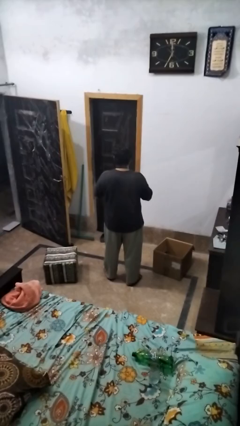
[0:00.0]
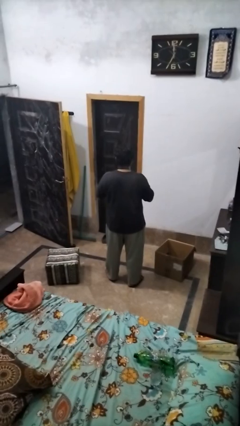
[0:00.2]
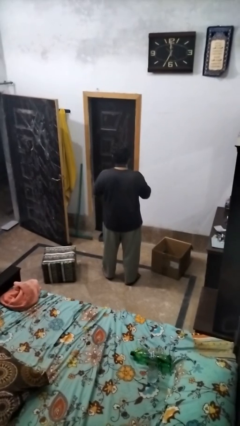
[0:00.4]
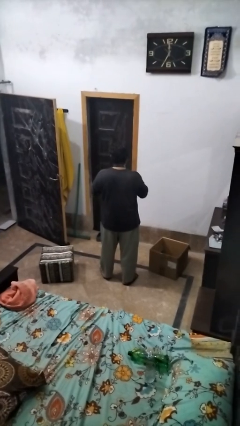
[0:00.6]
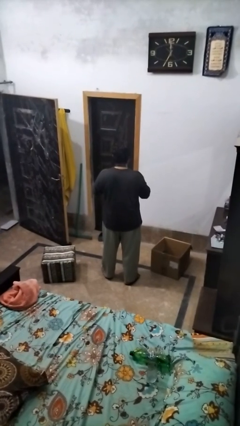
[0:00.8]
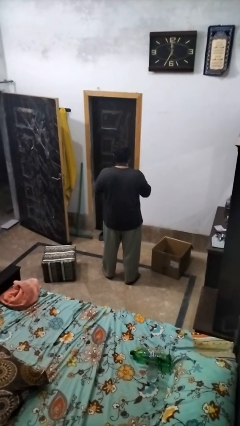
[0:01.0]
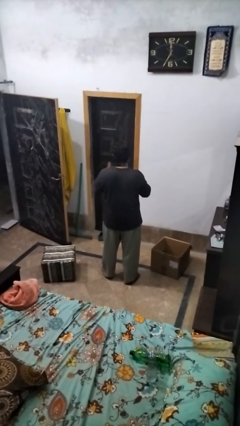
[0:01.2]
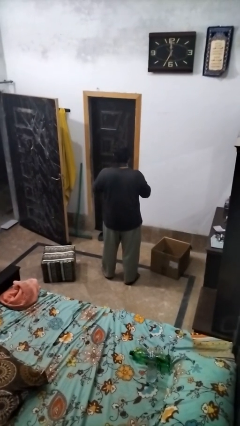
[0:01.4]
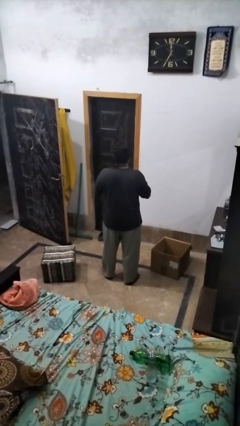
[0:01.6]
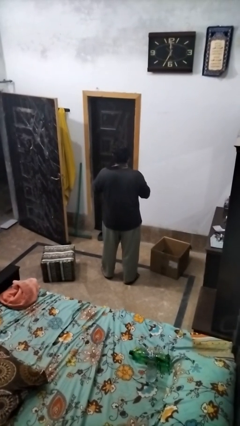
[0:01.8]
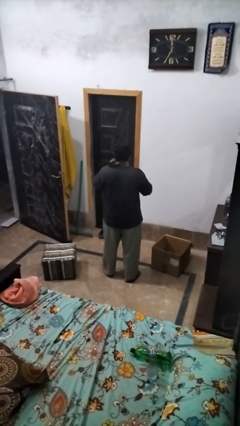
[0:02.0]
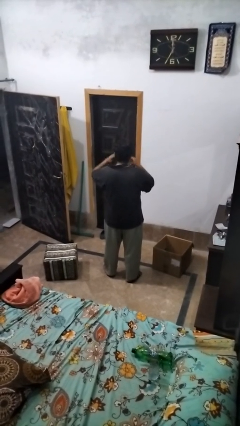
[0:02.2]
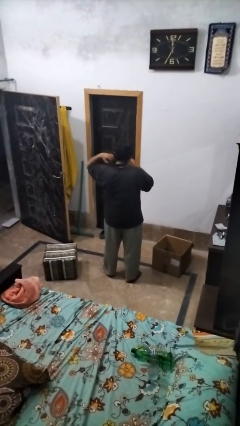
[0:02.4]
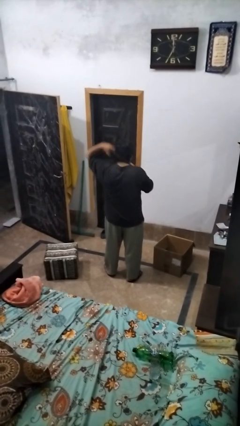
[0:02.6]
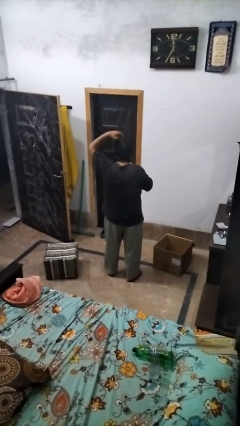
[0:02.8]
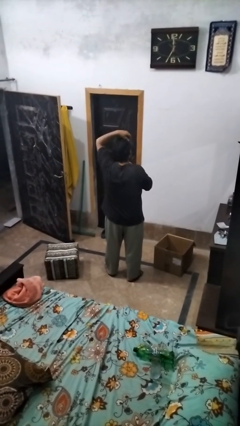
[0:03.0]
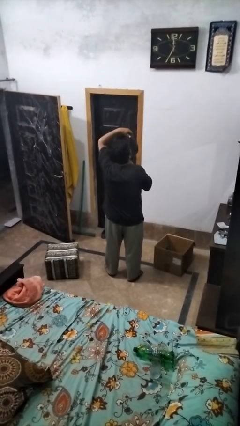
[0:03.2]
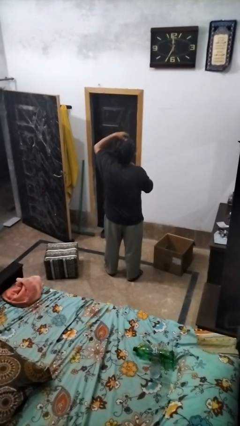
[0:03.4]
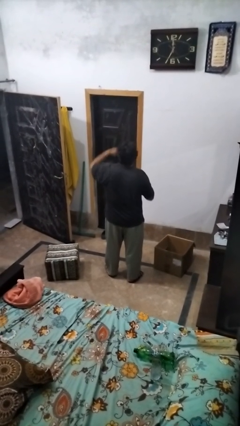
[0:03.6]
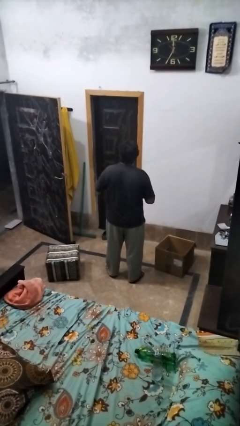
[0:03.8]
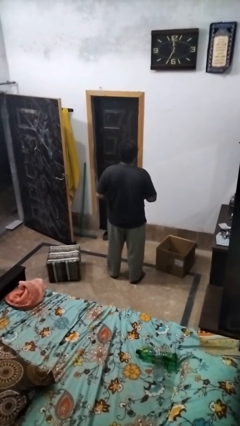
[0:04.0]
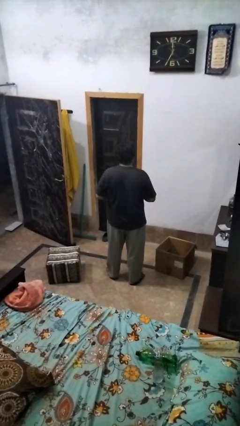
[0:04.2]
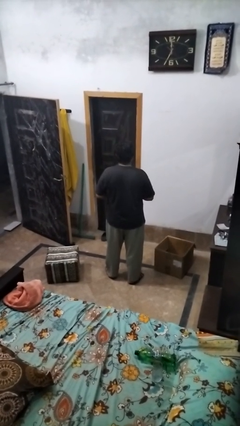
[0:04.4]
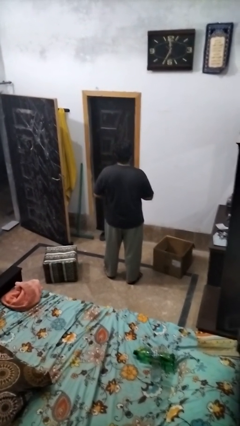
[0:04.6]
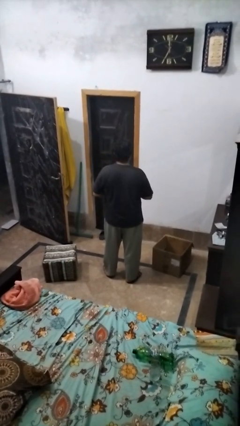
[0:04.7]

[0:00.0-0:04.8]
person takes off necktie

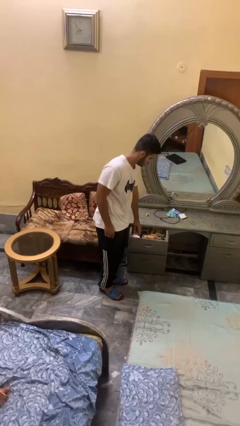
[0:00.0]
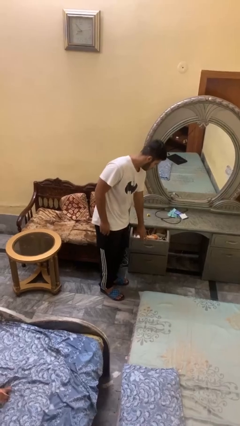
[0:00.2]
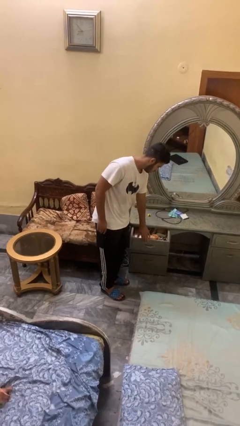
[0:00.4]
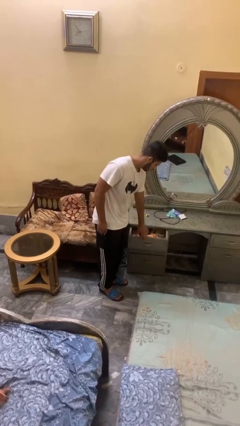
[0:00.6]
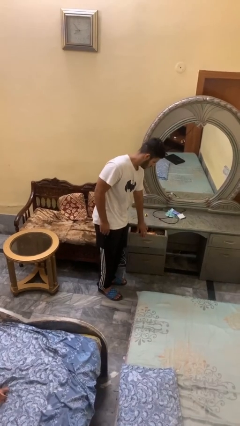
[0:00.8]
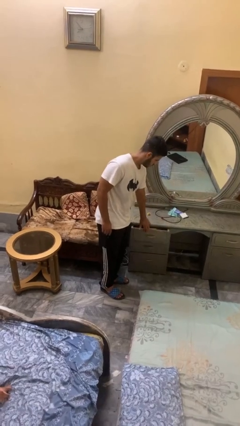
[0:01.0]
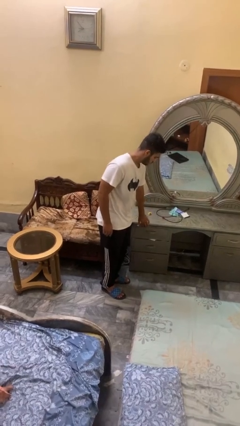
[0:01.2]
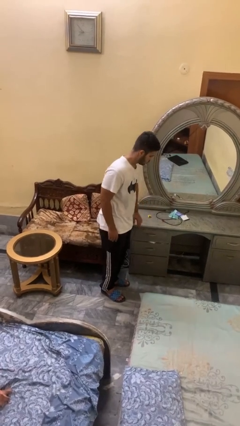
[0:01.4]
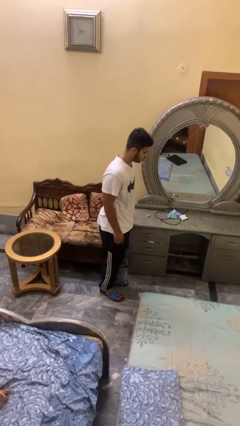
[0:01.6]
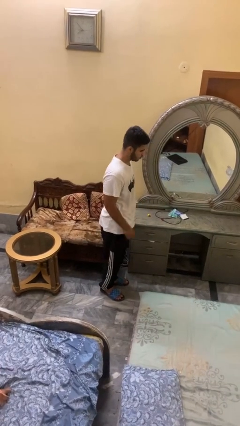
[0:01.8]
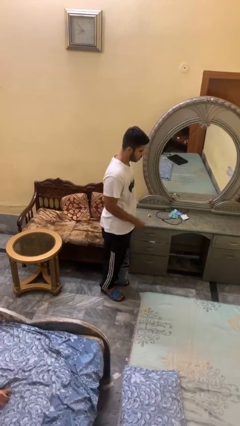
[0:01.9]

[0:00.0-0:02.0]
person closes dresser drawer

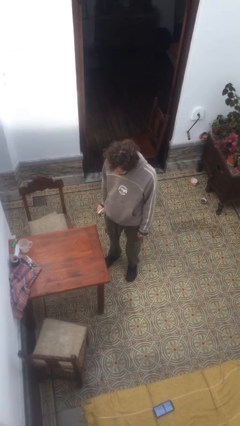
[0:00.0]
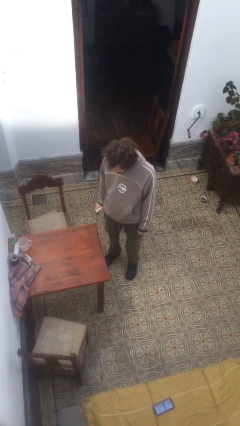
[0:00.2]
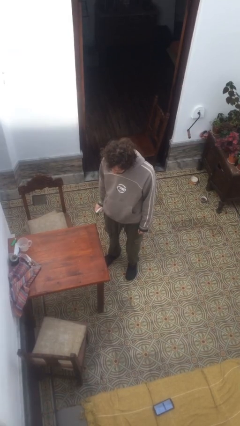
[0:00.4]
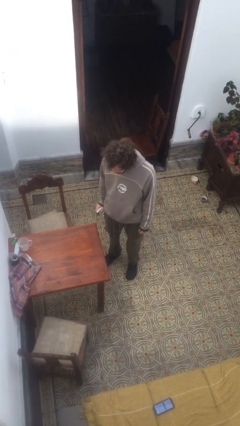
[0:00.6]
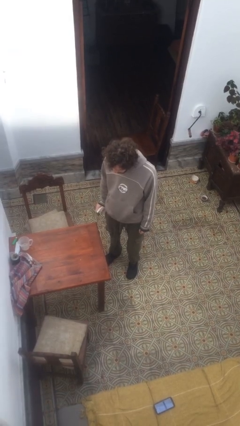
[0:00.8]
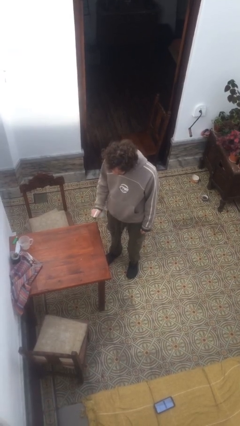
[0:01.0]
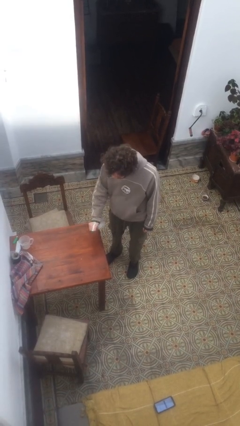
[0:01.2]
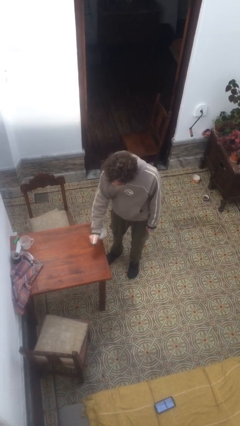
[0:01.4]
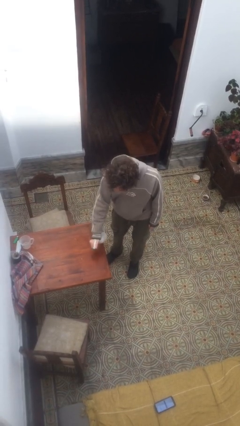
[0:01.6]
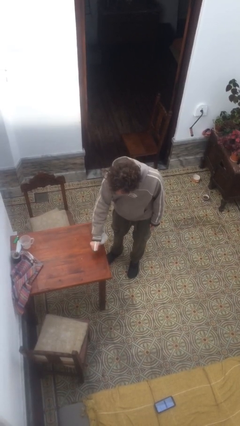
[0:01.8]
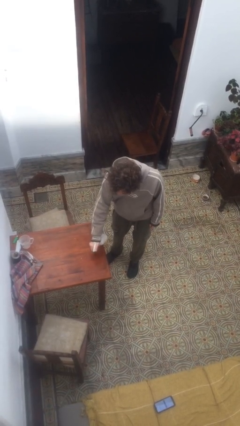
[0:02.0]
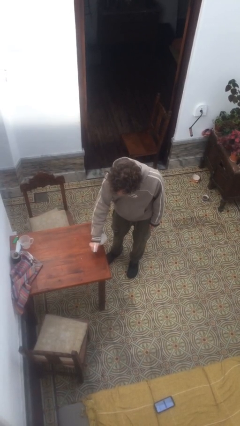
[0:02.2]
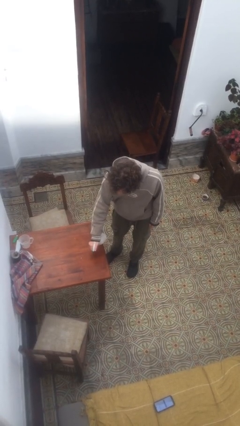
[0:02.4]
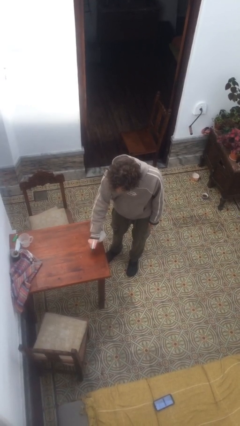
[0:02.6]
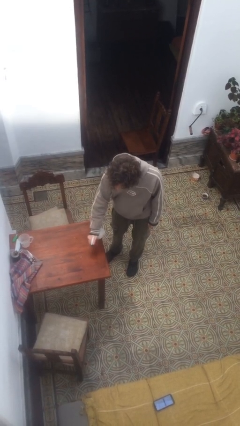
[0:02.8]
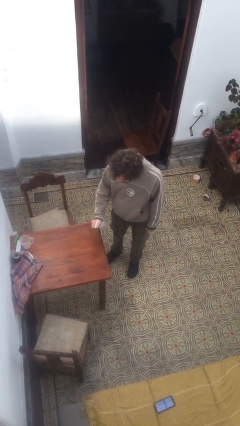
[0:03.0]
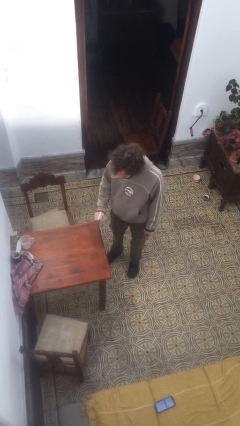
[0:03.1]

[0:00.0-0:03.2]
person sprays from bottle

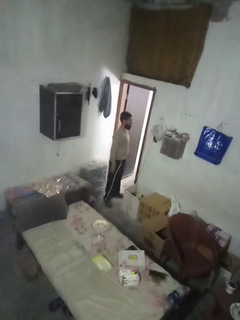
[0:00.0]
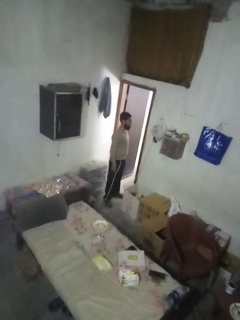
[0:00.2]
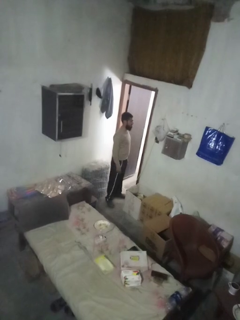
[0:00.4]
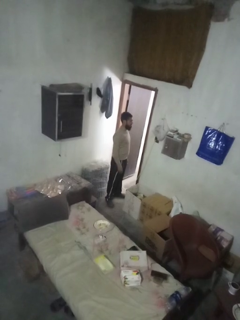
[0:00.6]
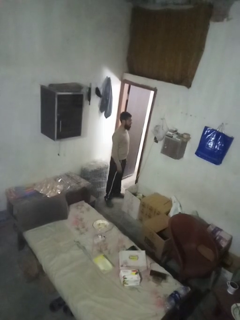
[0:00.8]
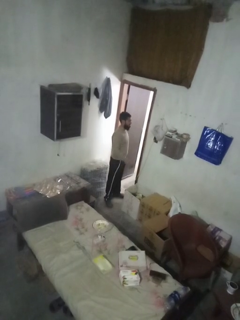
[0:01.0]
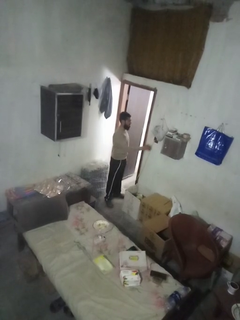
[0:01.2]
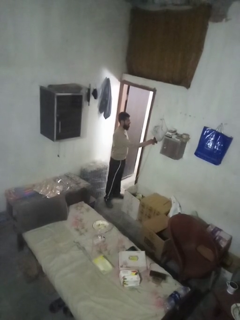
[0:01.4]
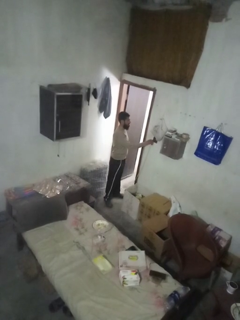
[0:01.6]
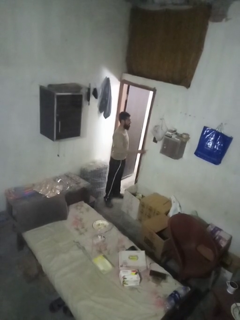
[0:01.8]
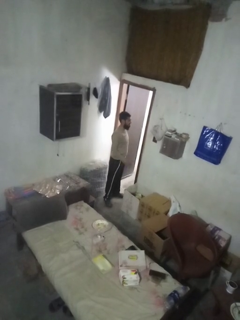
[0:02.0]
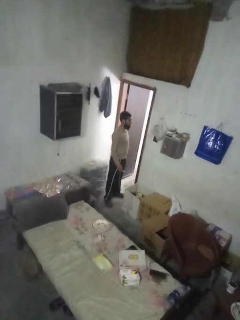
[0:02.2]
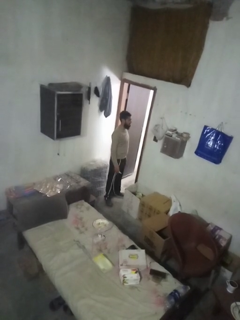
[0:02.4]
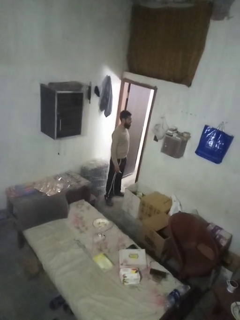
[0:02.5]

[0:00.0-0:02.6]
person unplugs from electrical socket

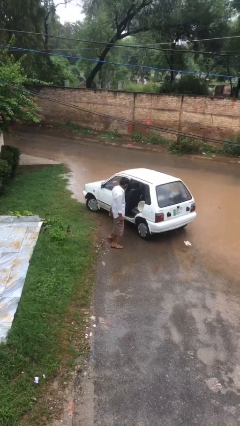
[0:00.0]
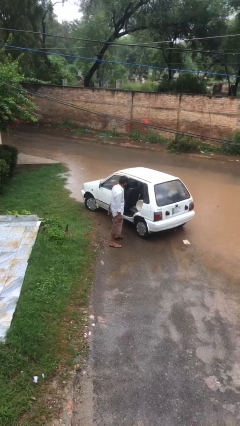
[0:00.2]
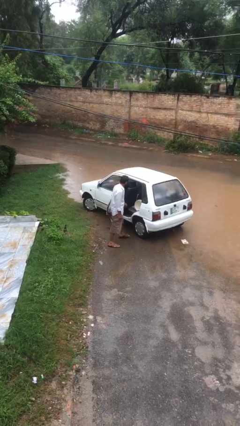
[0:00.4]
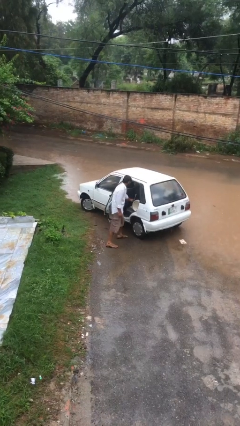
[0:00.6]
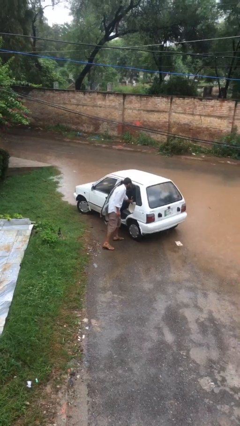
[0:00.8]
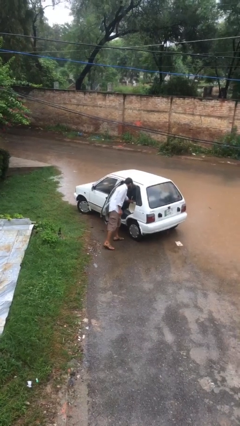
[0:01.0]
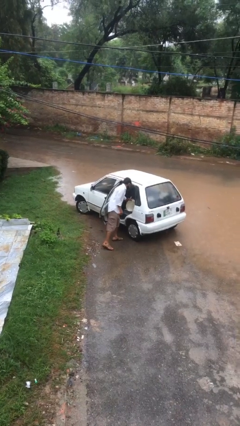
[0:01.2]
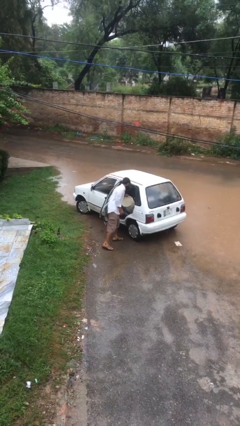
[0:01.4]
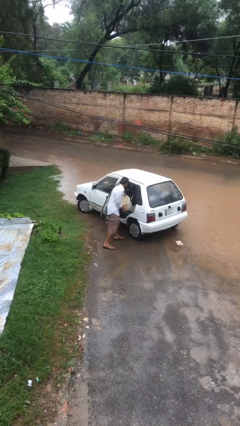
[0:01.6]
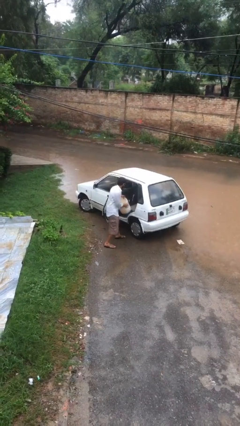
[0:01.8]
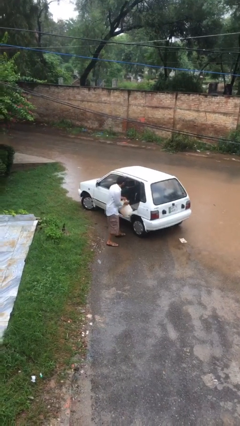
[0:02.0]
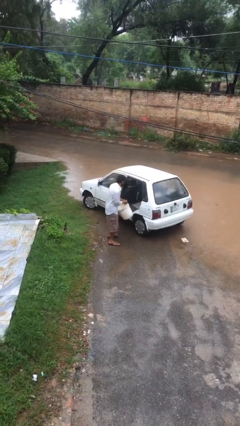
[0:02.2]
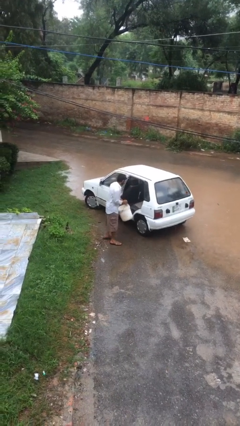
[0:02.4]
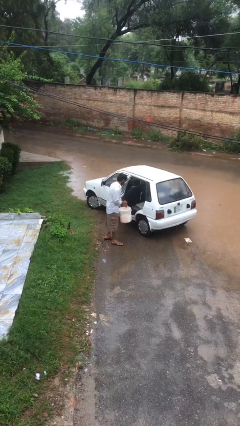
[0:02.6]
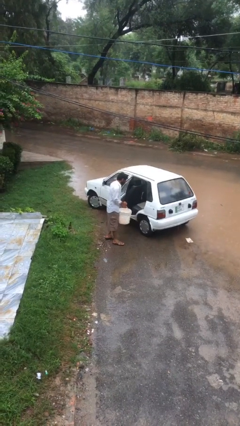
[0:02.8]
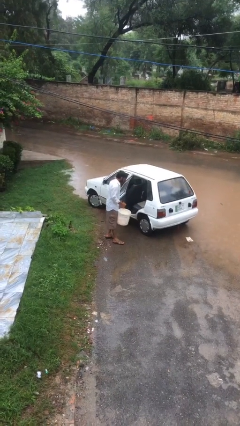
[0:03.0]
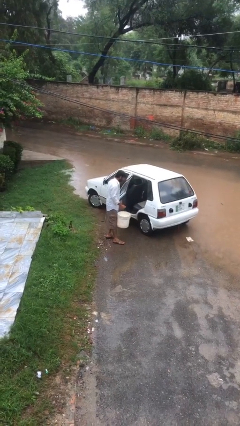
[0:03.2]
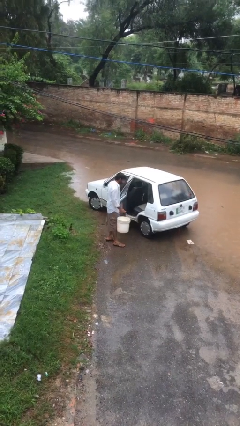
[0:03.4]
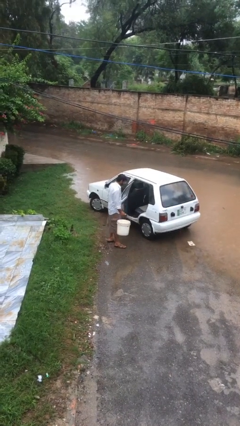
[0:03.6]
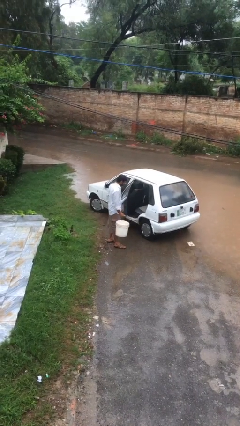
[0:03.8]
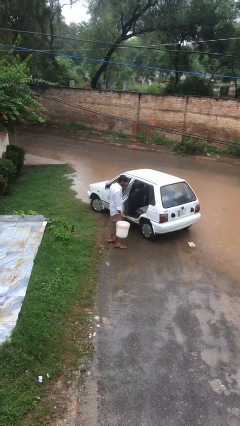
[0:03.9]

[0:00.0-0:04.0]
person unloads car

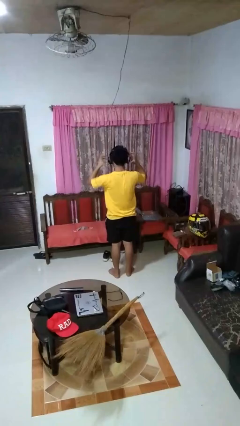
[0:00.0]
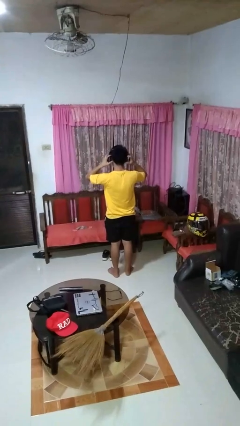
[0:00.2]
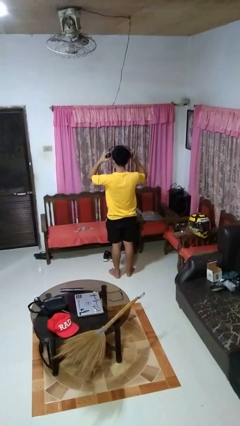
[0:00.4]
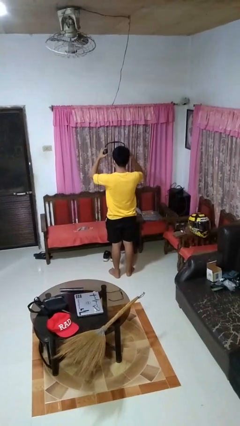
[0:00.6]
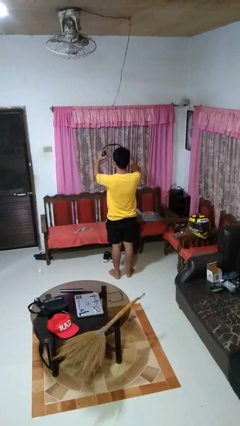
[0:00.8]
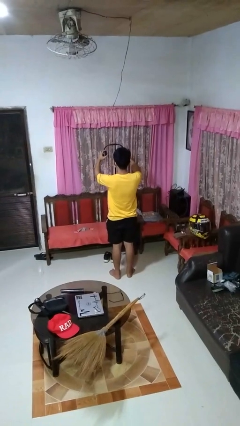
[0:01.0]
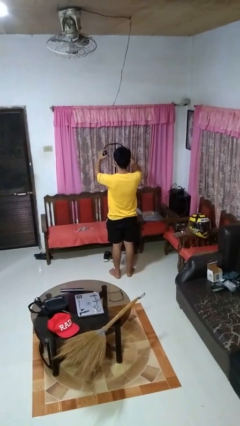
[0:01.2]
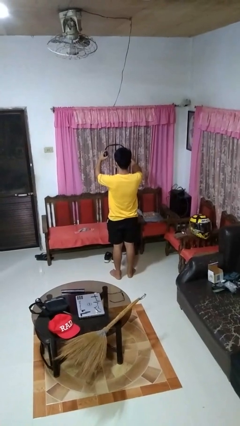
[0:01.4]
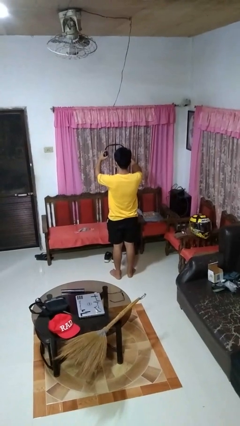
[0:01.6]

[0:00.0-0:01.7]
person takes off headphones

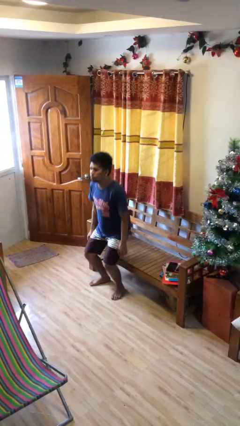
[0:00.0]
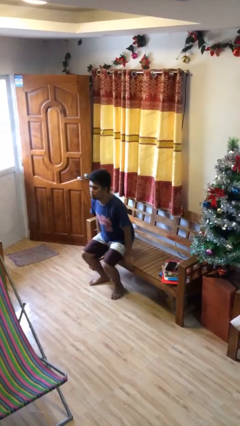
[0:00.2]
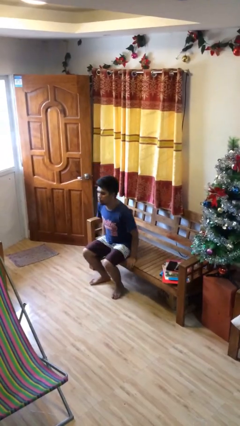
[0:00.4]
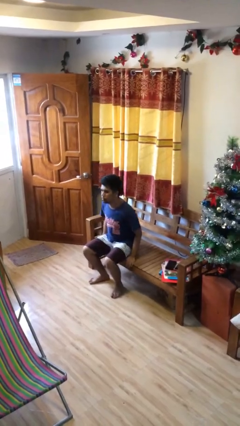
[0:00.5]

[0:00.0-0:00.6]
person sits down
